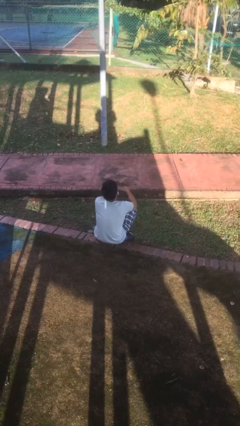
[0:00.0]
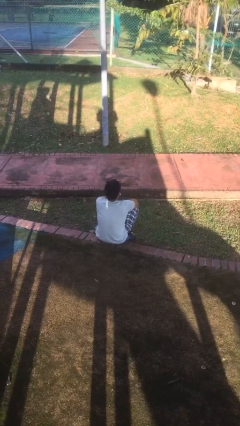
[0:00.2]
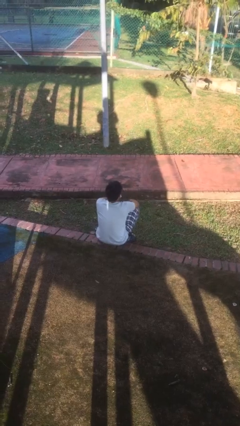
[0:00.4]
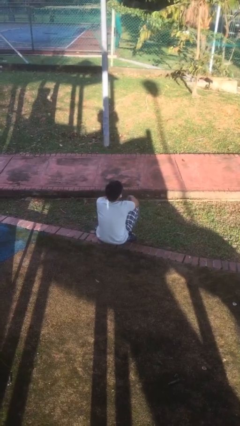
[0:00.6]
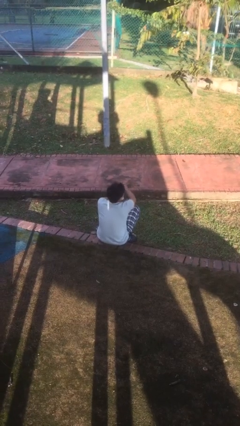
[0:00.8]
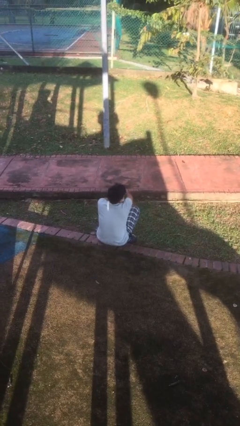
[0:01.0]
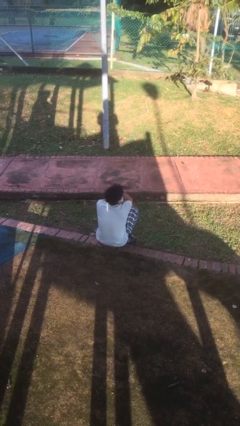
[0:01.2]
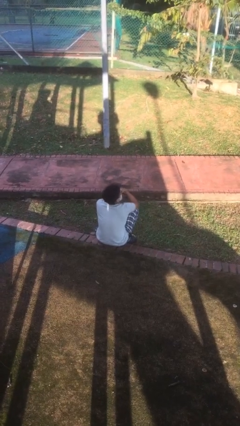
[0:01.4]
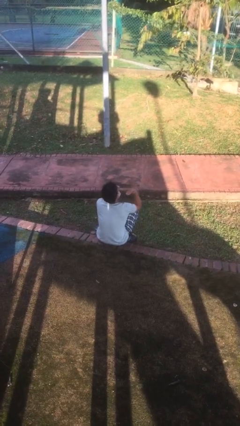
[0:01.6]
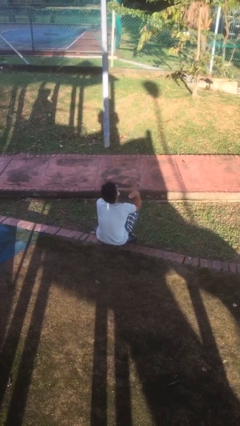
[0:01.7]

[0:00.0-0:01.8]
person gestures cut

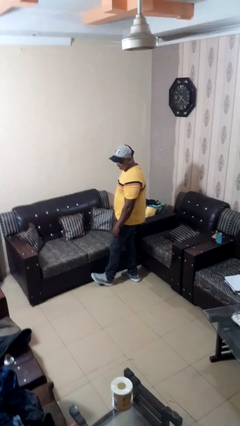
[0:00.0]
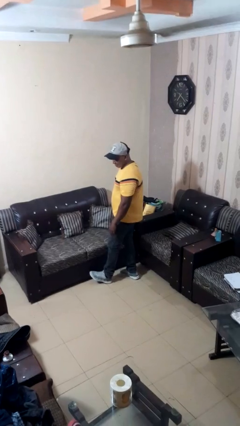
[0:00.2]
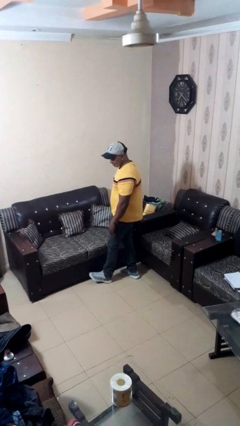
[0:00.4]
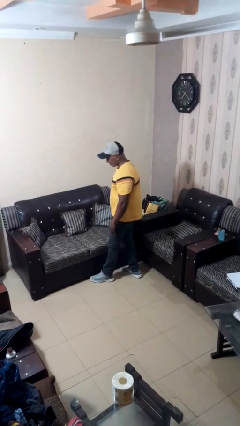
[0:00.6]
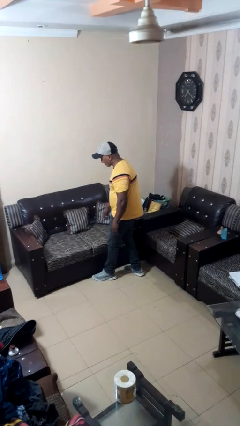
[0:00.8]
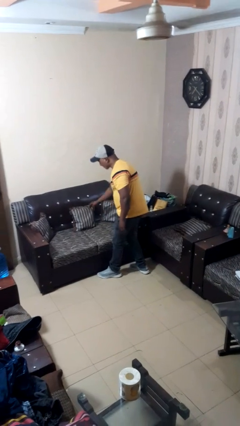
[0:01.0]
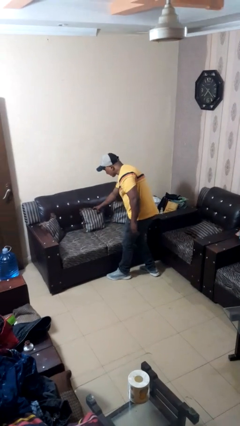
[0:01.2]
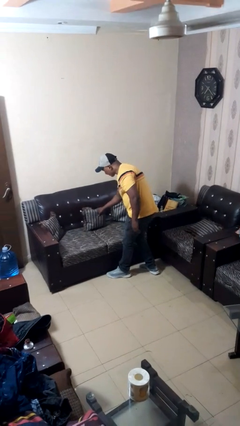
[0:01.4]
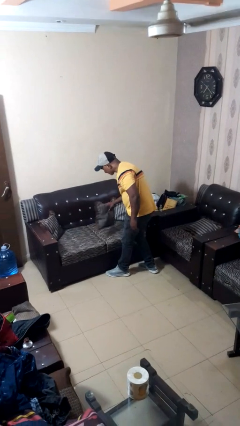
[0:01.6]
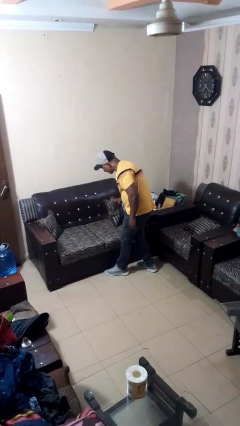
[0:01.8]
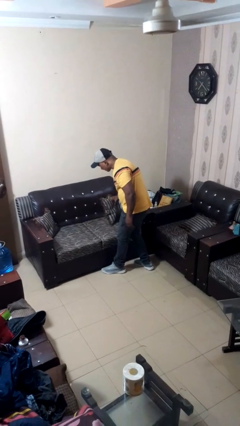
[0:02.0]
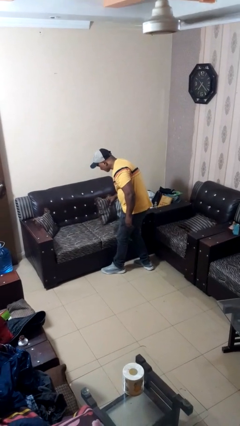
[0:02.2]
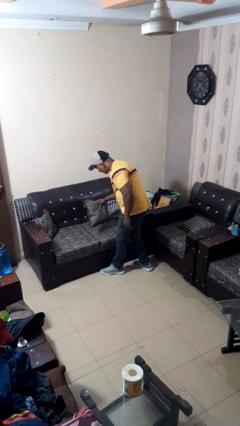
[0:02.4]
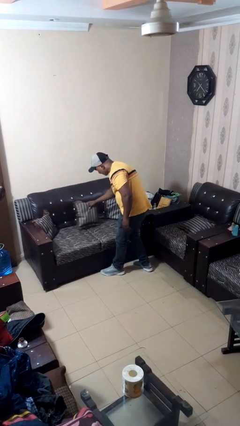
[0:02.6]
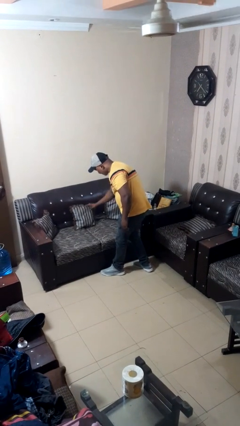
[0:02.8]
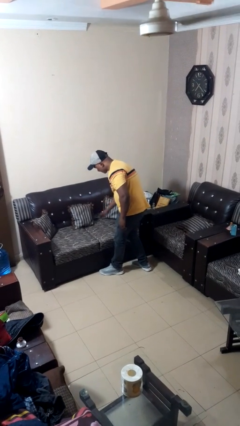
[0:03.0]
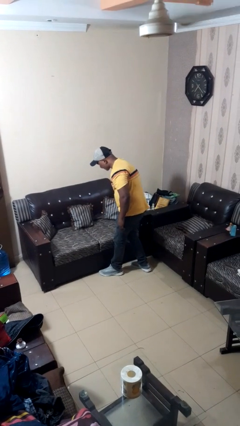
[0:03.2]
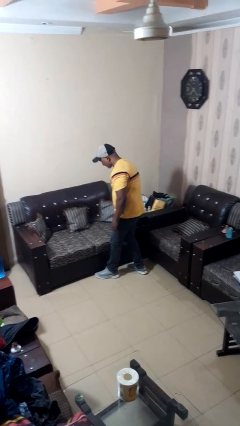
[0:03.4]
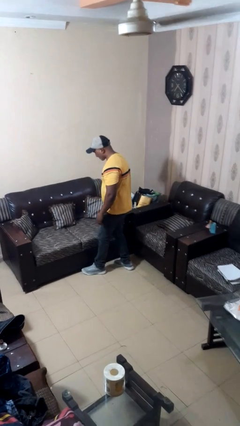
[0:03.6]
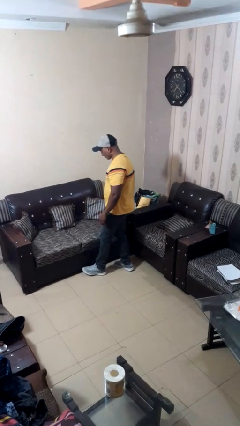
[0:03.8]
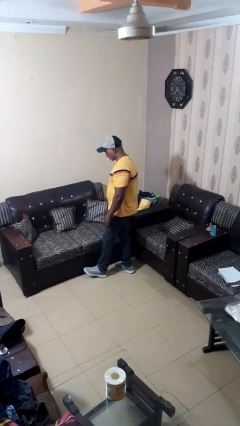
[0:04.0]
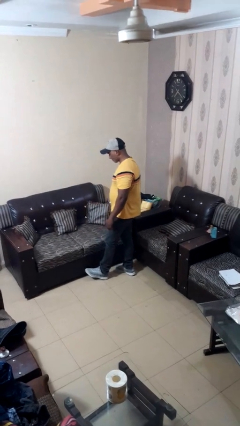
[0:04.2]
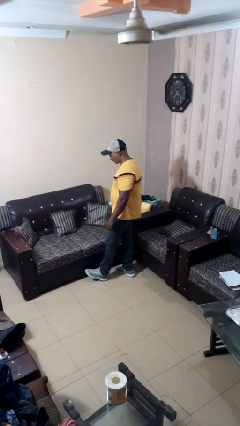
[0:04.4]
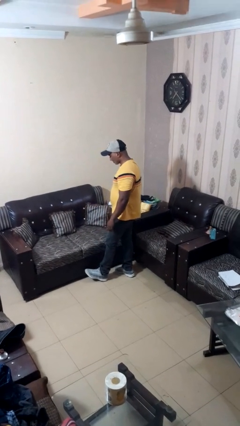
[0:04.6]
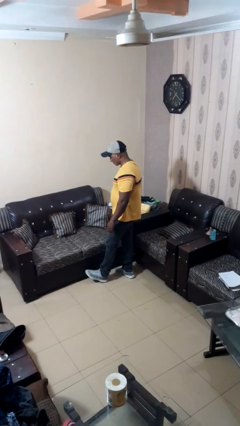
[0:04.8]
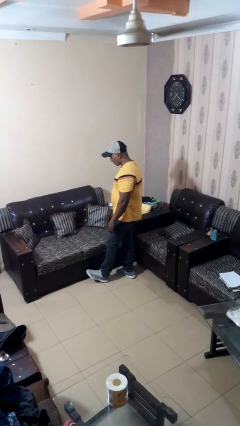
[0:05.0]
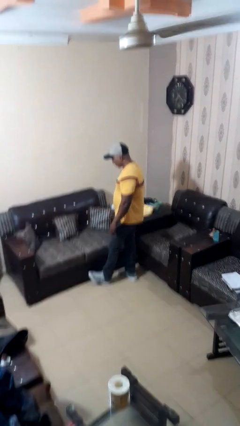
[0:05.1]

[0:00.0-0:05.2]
person searches in couch

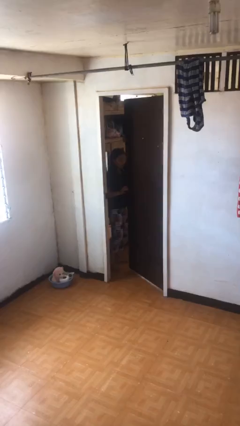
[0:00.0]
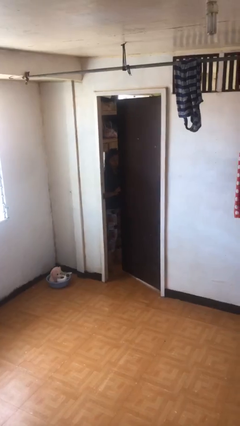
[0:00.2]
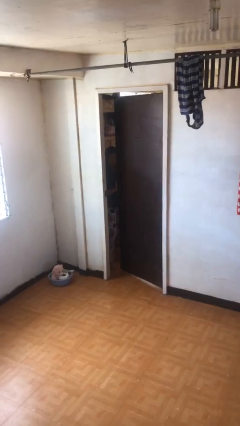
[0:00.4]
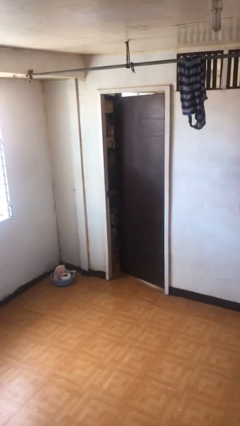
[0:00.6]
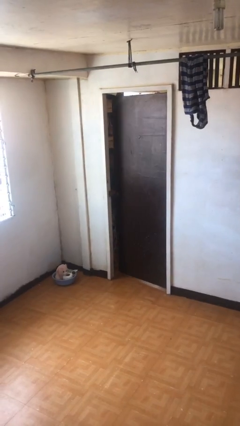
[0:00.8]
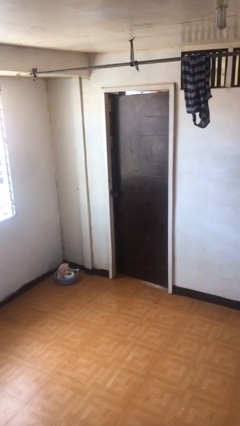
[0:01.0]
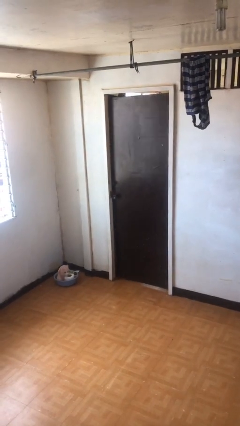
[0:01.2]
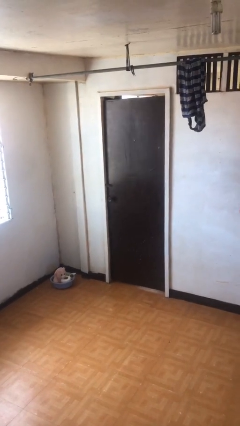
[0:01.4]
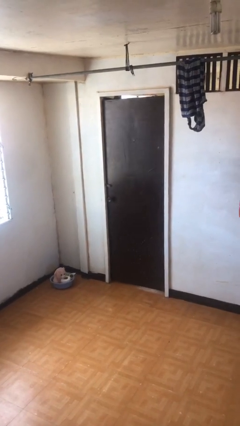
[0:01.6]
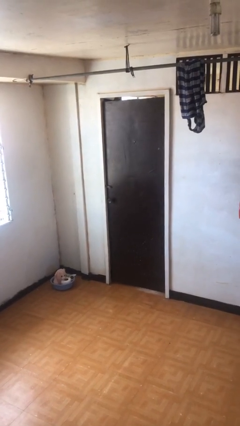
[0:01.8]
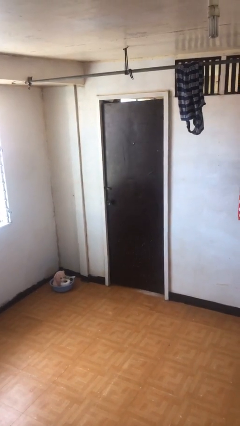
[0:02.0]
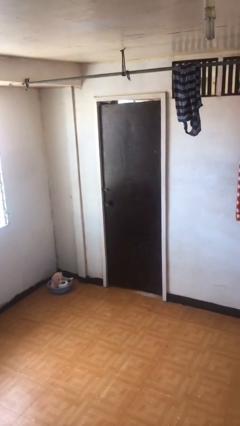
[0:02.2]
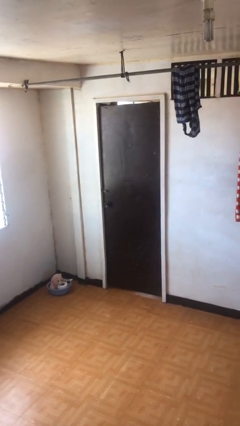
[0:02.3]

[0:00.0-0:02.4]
person closes facility door

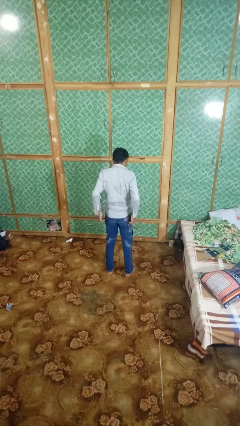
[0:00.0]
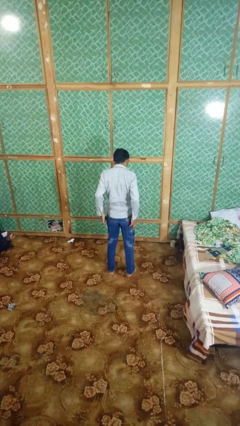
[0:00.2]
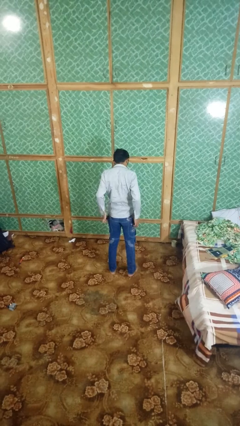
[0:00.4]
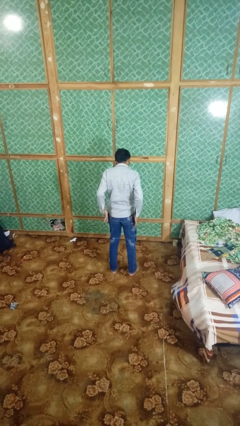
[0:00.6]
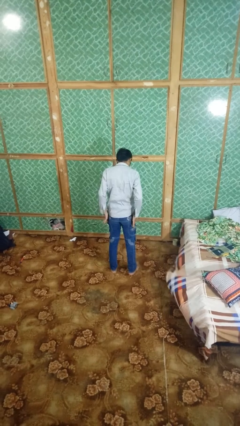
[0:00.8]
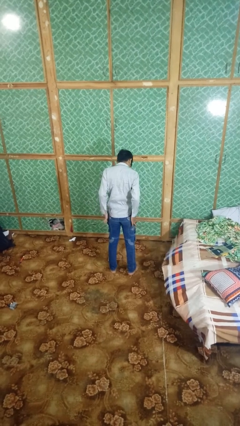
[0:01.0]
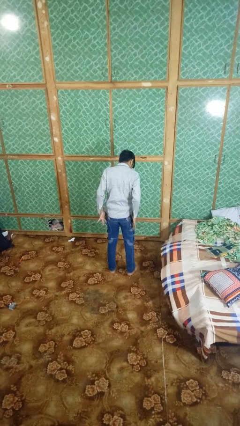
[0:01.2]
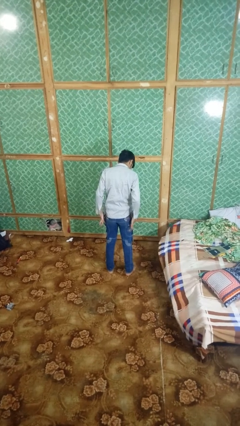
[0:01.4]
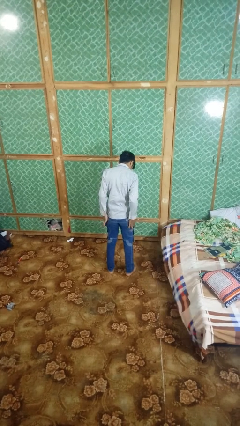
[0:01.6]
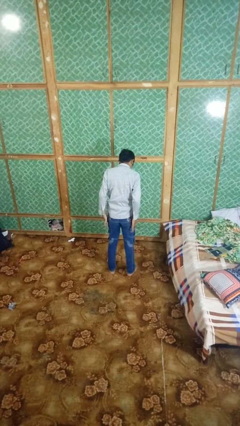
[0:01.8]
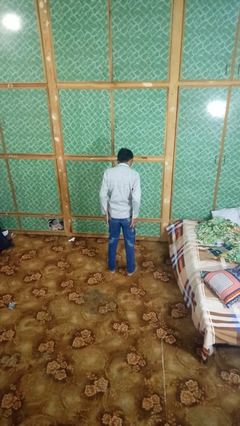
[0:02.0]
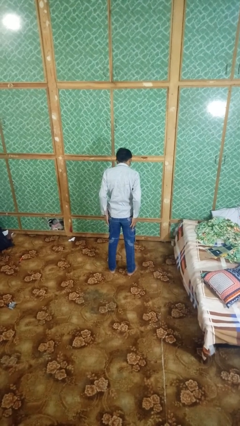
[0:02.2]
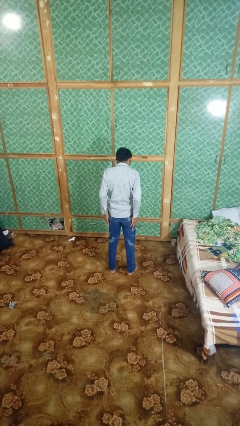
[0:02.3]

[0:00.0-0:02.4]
person puts hands in back pockets

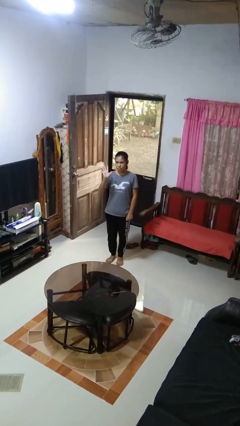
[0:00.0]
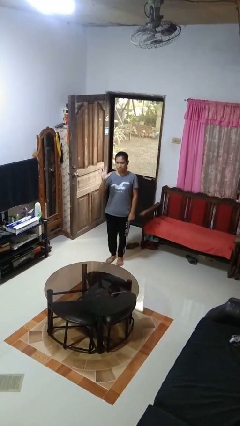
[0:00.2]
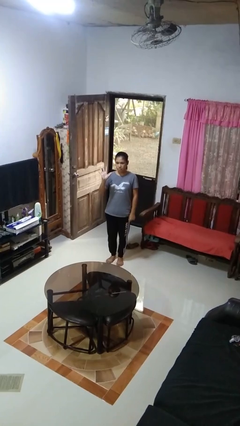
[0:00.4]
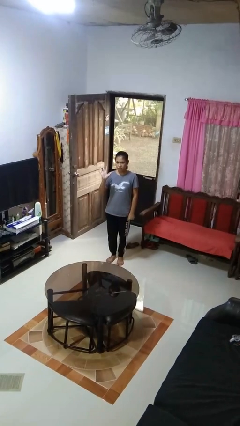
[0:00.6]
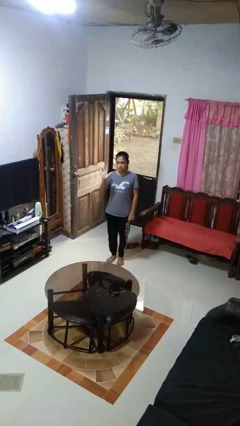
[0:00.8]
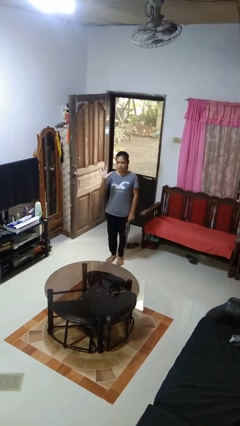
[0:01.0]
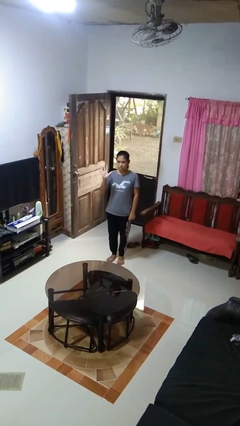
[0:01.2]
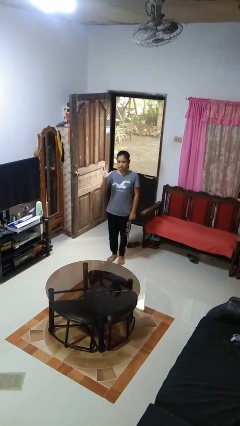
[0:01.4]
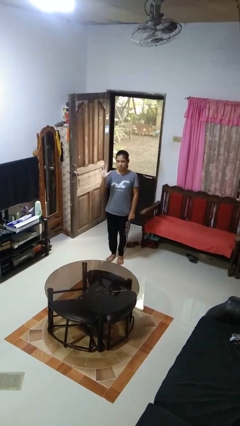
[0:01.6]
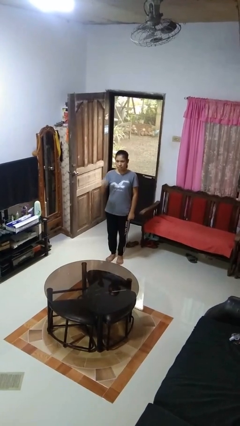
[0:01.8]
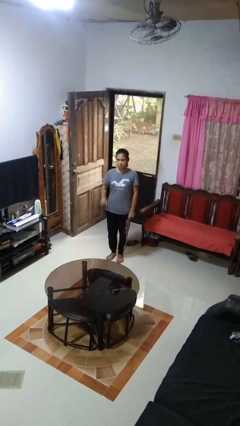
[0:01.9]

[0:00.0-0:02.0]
person gestures number five

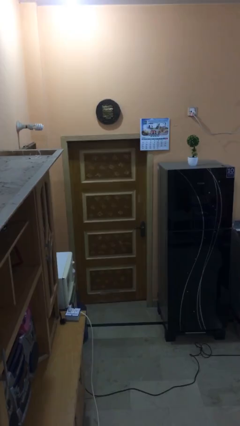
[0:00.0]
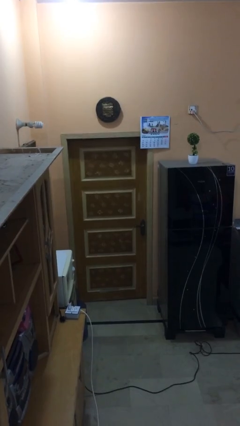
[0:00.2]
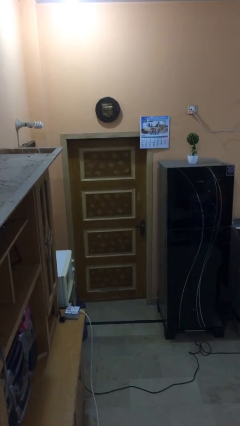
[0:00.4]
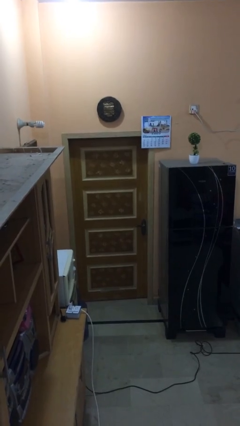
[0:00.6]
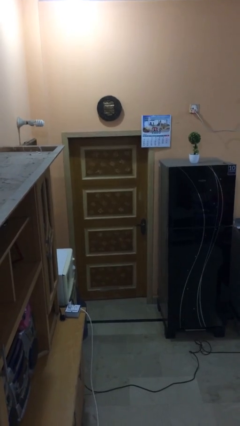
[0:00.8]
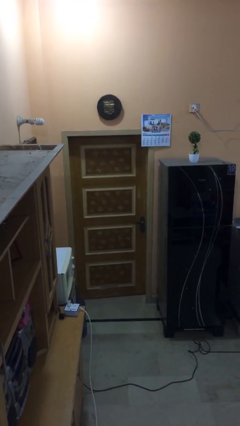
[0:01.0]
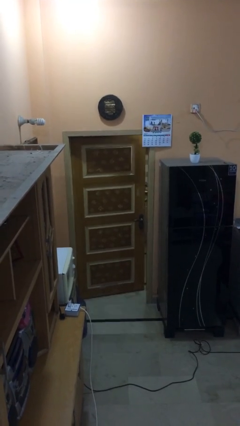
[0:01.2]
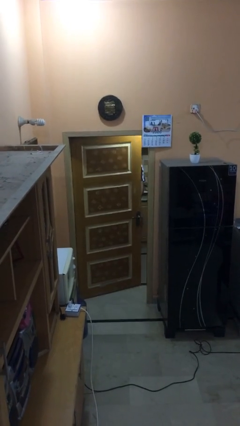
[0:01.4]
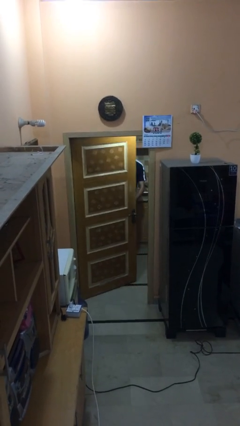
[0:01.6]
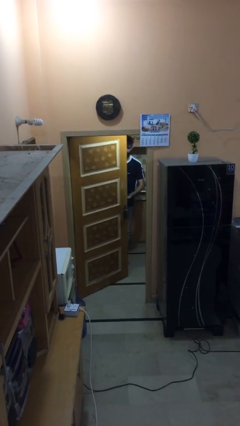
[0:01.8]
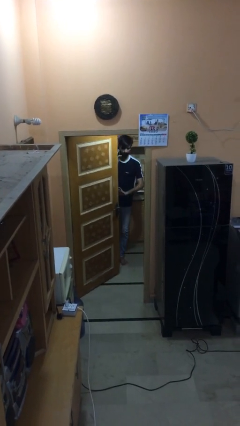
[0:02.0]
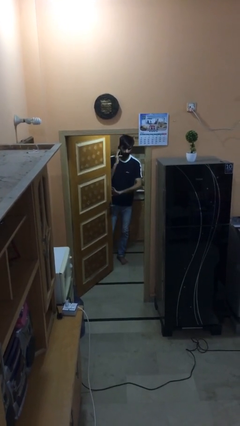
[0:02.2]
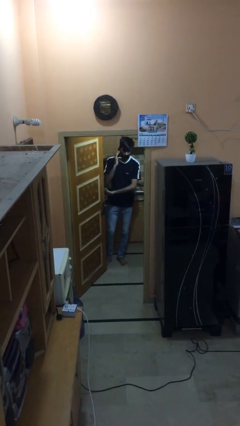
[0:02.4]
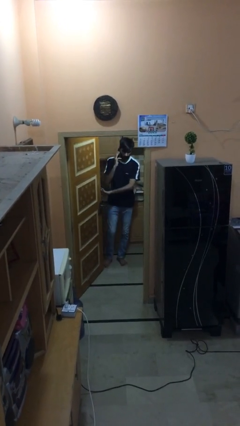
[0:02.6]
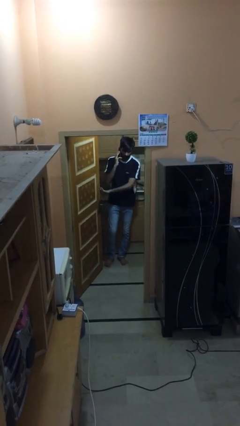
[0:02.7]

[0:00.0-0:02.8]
person opens facility door

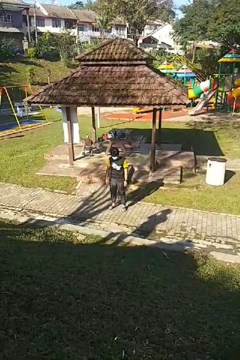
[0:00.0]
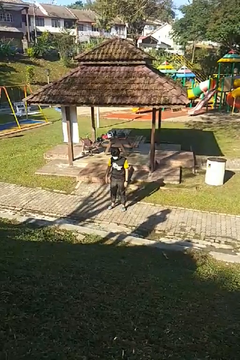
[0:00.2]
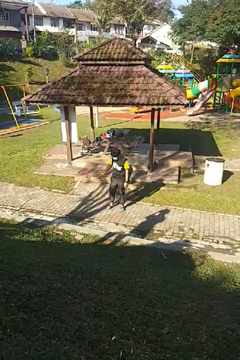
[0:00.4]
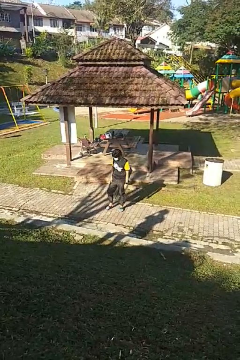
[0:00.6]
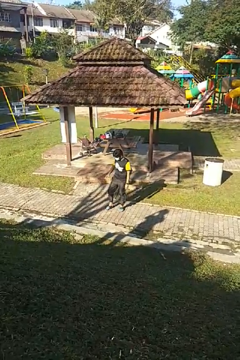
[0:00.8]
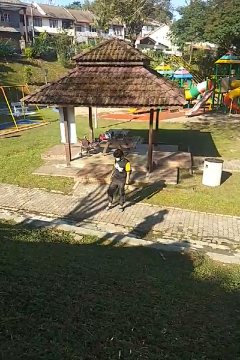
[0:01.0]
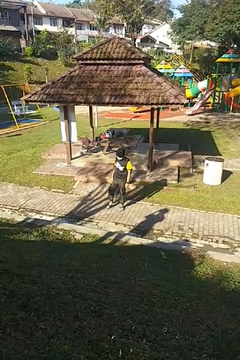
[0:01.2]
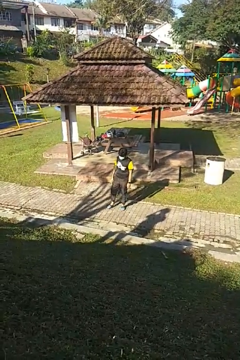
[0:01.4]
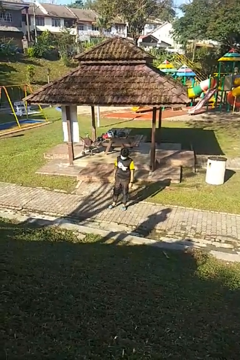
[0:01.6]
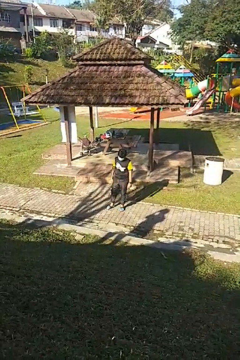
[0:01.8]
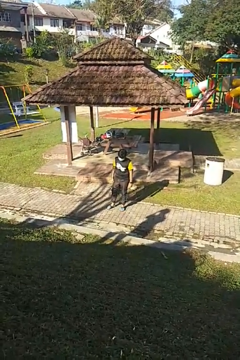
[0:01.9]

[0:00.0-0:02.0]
person slaps hands on thighs
